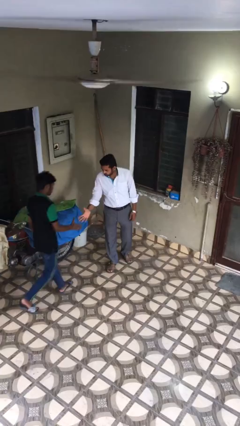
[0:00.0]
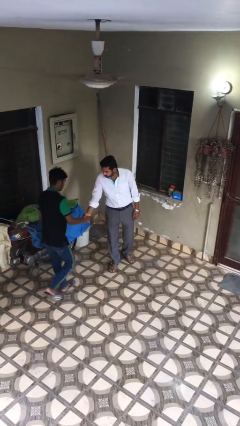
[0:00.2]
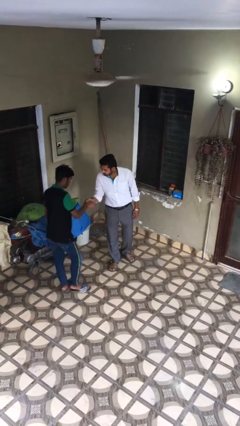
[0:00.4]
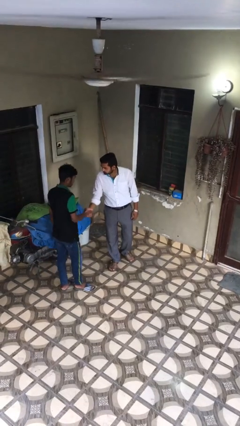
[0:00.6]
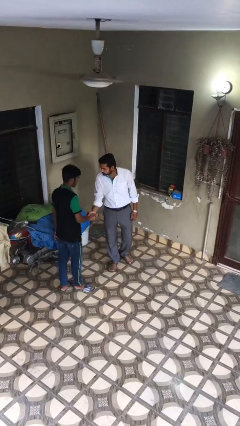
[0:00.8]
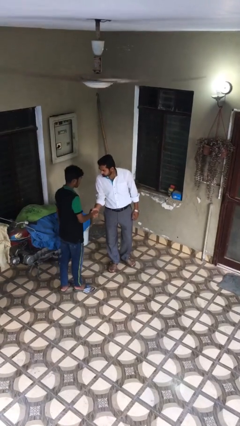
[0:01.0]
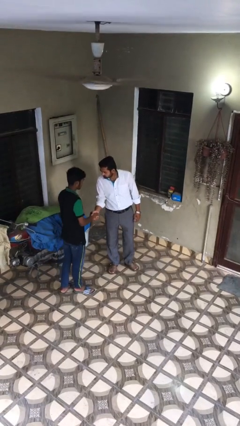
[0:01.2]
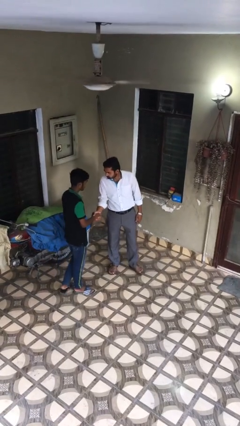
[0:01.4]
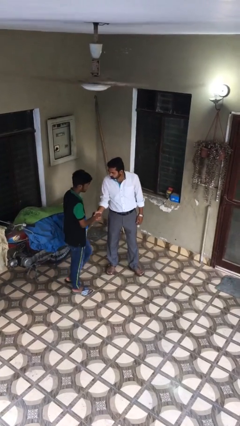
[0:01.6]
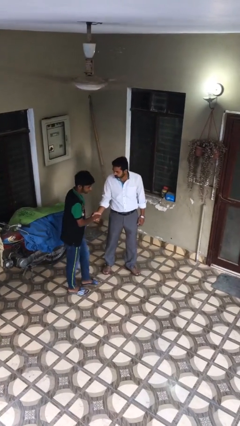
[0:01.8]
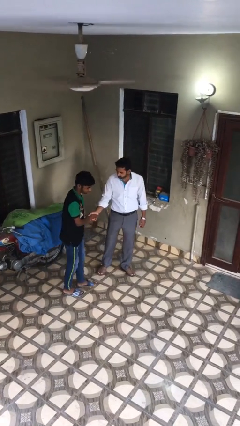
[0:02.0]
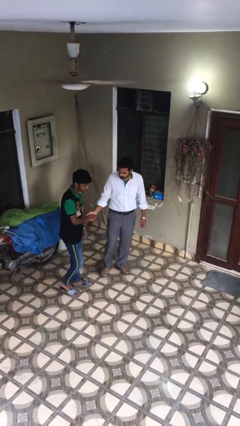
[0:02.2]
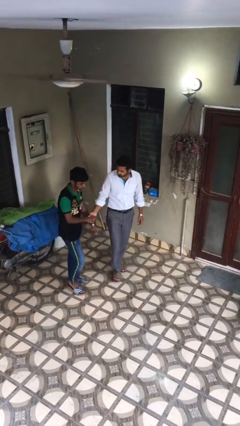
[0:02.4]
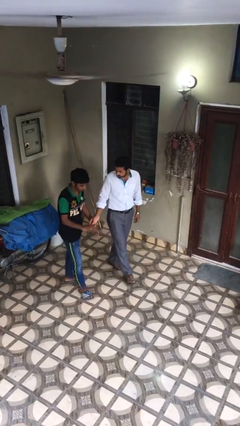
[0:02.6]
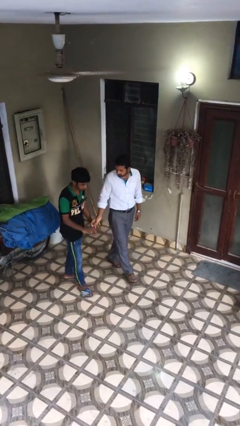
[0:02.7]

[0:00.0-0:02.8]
person shakes hand

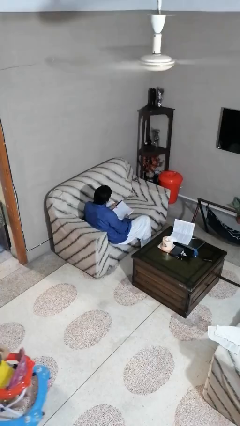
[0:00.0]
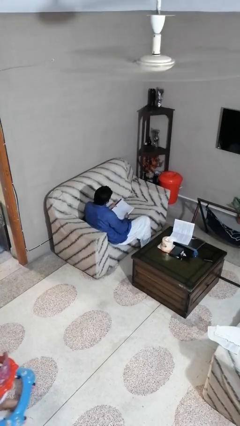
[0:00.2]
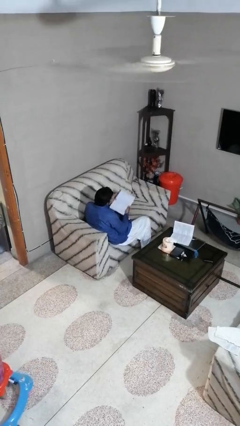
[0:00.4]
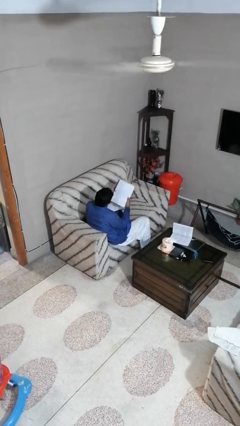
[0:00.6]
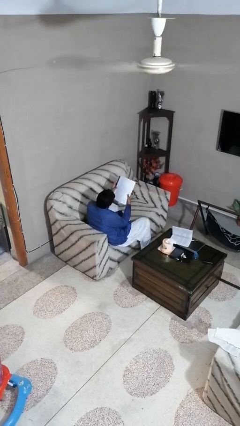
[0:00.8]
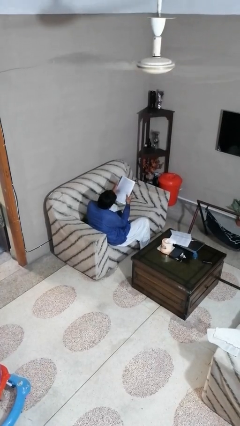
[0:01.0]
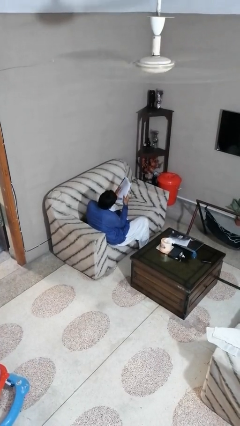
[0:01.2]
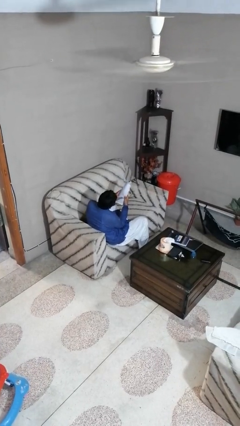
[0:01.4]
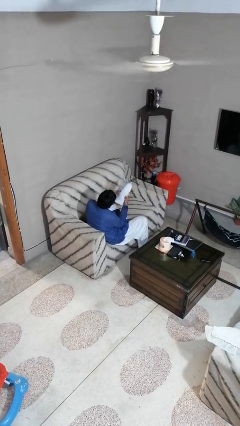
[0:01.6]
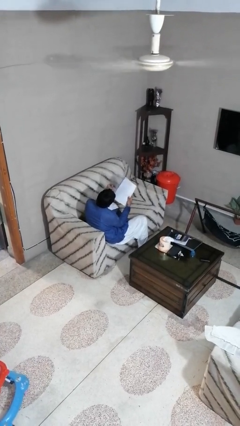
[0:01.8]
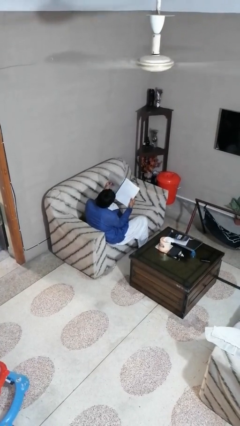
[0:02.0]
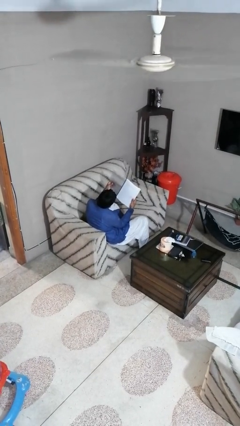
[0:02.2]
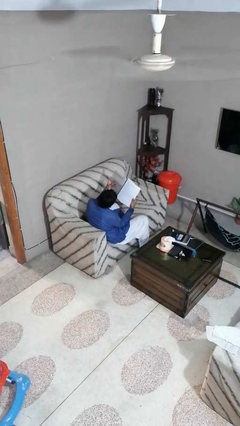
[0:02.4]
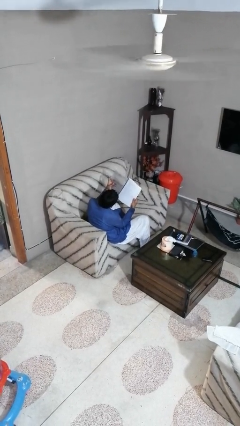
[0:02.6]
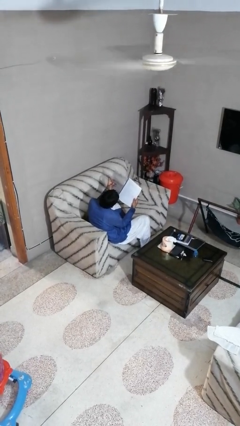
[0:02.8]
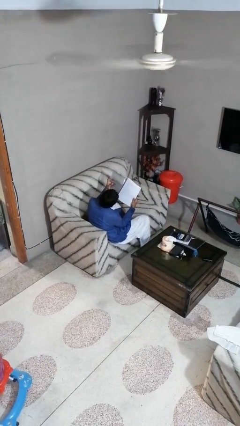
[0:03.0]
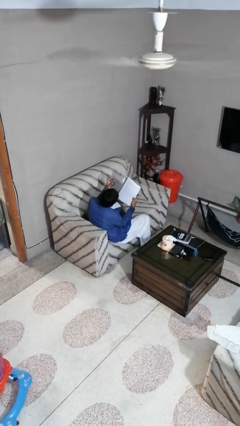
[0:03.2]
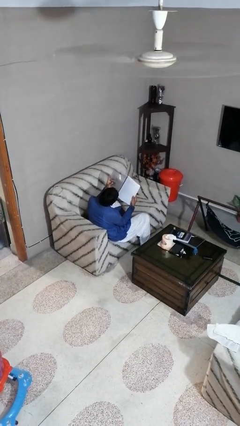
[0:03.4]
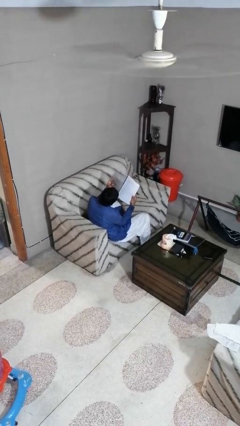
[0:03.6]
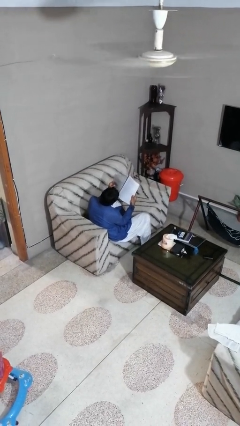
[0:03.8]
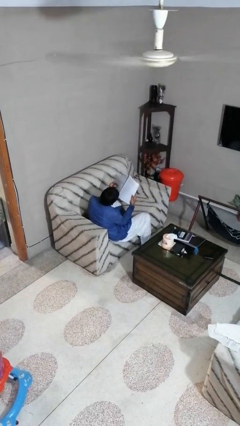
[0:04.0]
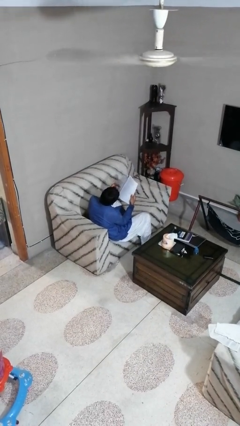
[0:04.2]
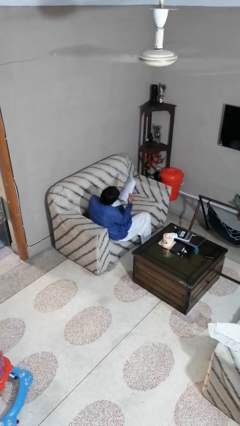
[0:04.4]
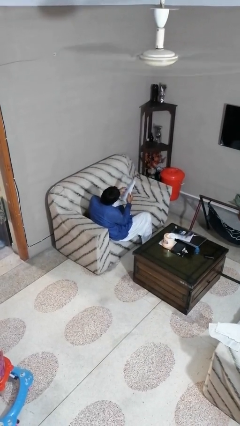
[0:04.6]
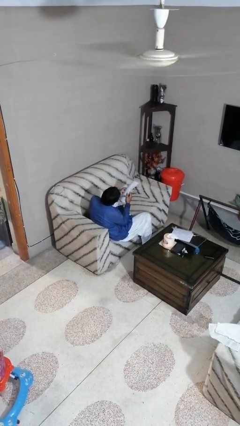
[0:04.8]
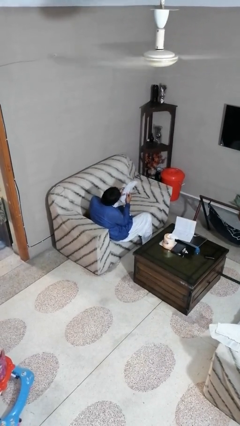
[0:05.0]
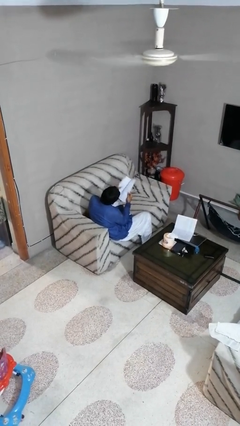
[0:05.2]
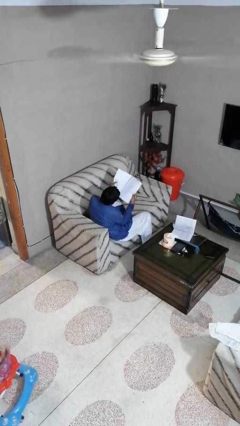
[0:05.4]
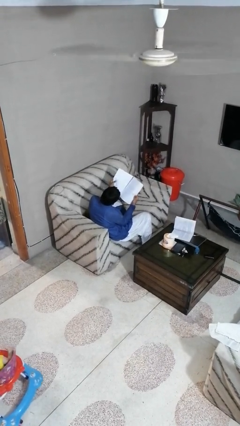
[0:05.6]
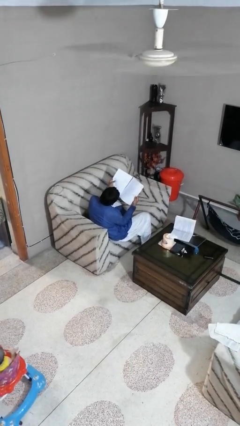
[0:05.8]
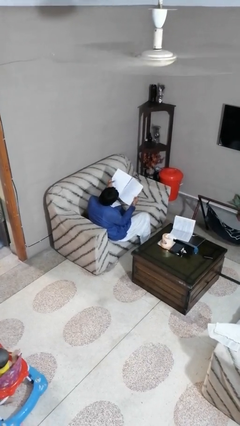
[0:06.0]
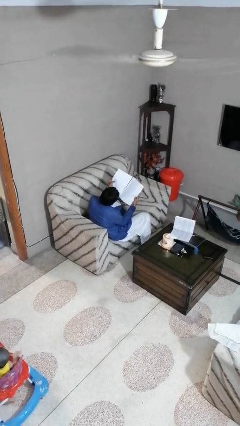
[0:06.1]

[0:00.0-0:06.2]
person reads magazine

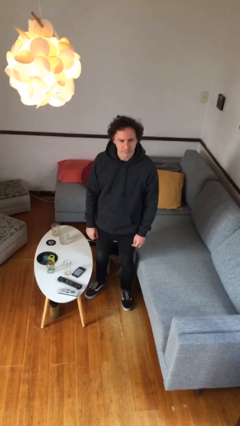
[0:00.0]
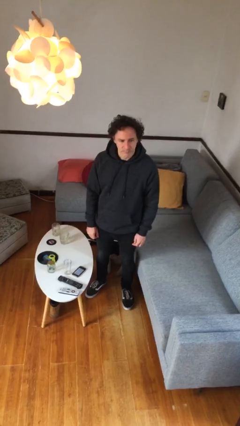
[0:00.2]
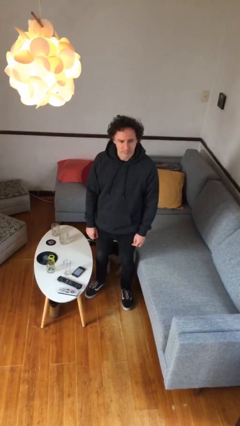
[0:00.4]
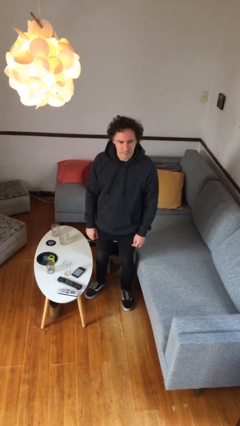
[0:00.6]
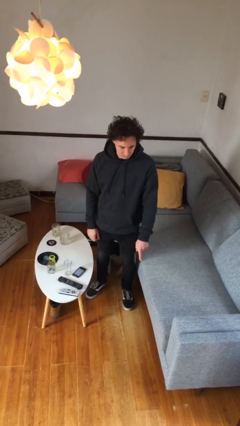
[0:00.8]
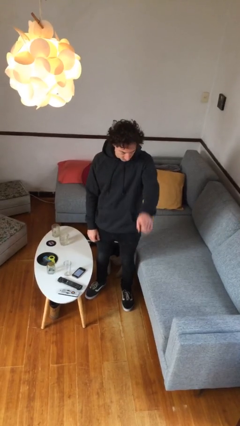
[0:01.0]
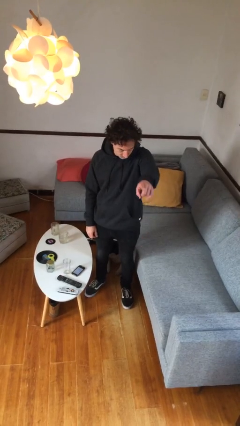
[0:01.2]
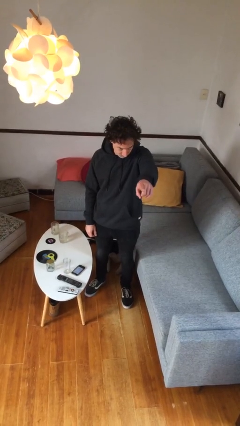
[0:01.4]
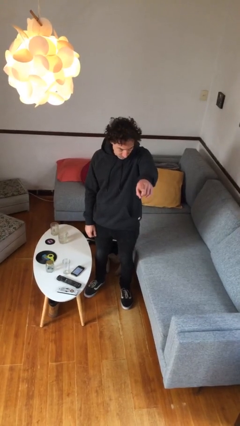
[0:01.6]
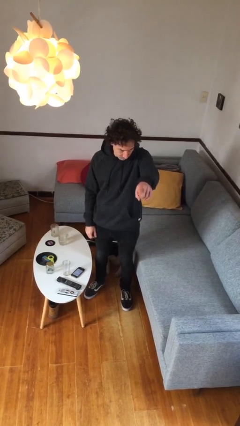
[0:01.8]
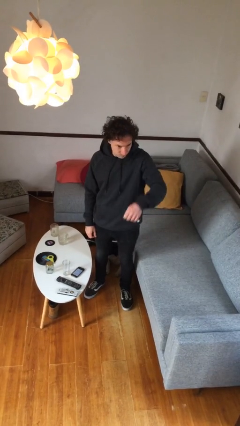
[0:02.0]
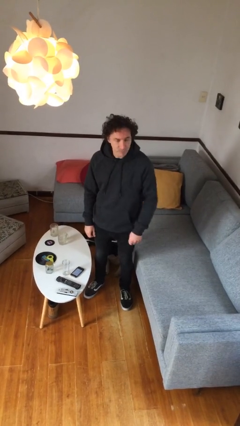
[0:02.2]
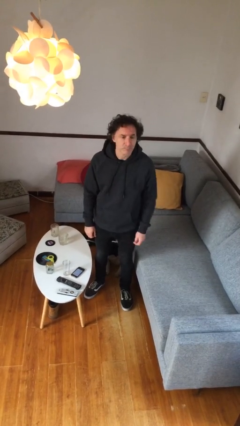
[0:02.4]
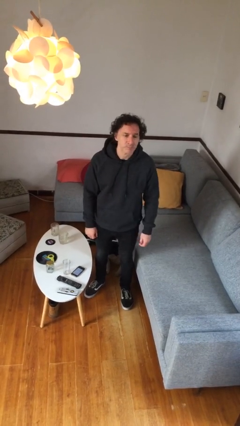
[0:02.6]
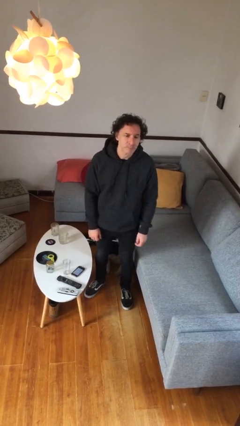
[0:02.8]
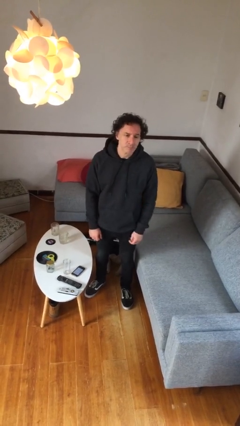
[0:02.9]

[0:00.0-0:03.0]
person points at person

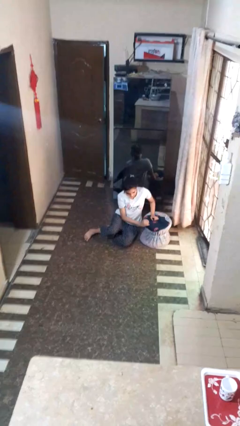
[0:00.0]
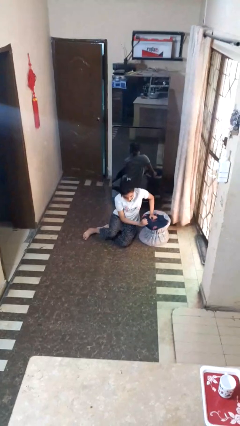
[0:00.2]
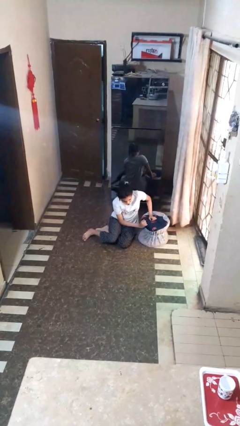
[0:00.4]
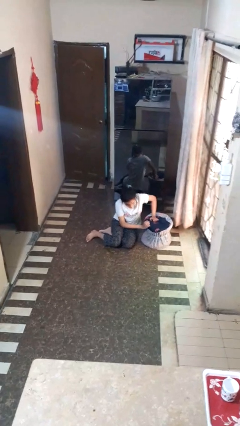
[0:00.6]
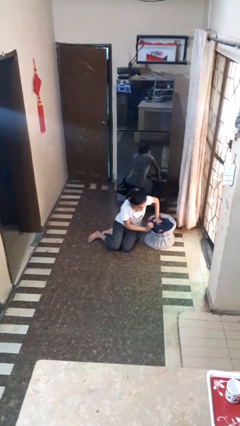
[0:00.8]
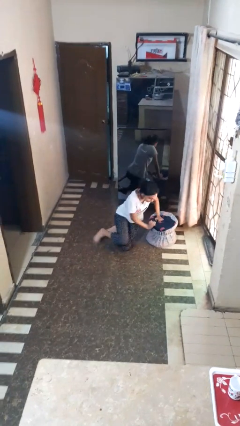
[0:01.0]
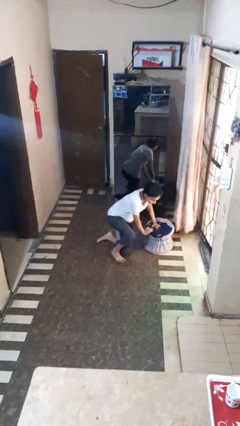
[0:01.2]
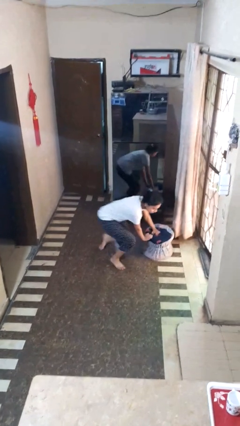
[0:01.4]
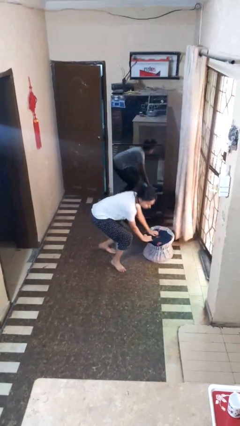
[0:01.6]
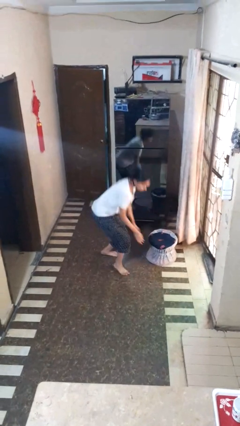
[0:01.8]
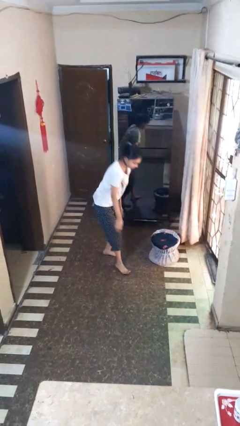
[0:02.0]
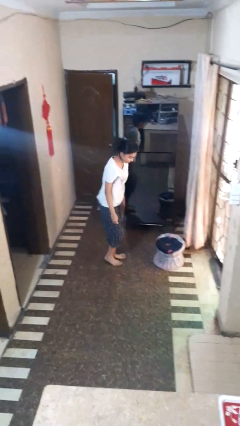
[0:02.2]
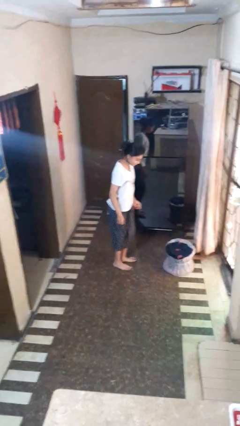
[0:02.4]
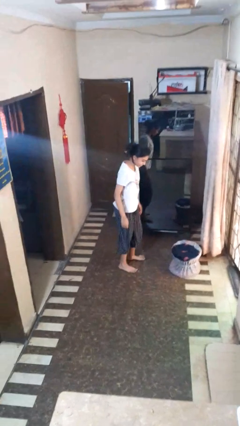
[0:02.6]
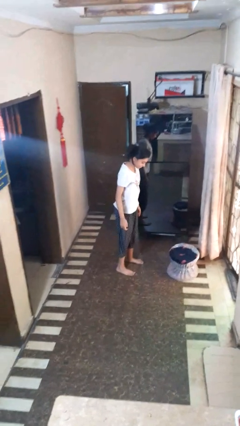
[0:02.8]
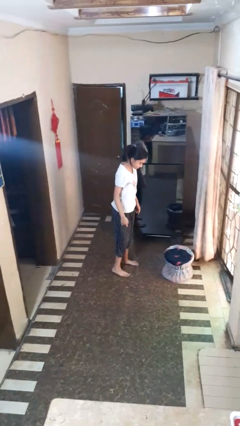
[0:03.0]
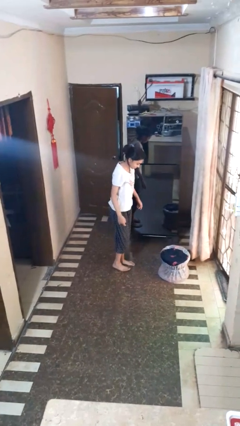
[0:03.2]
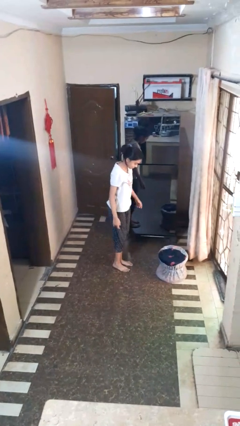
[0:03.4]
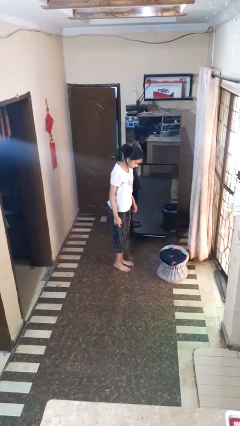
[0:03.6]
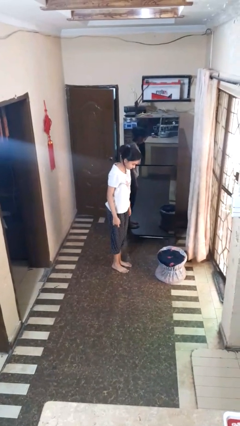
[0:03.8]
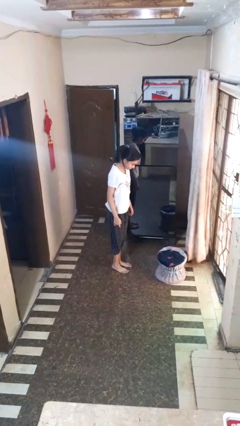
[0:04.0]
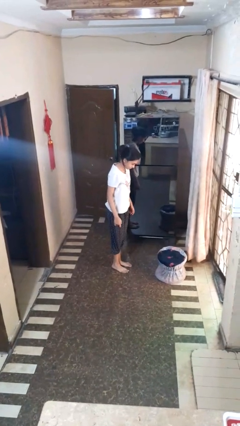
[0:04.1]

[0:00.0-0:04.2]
person stands up from floor

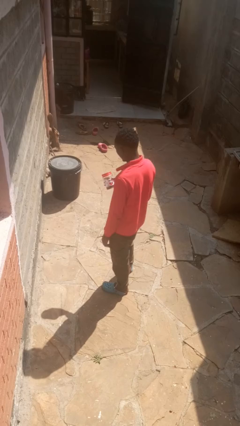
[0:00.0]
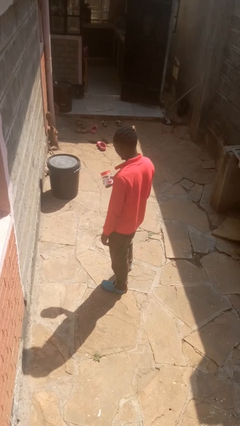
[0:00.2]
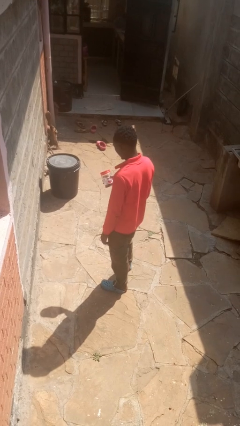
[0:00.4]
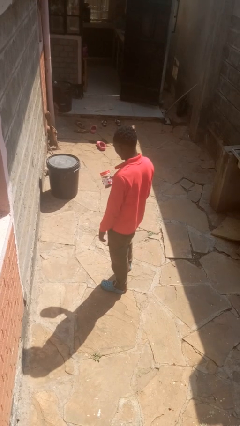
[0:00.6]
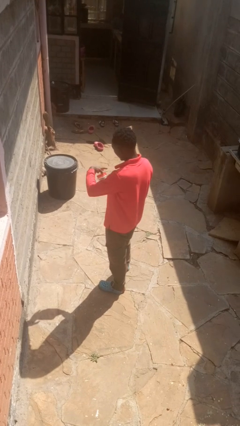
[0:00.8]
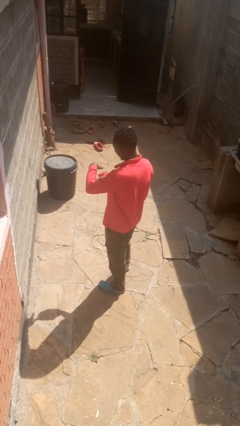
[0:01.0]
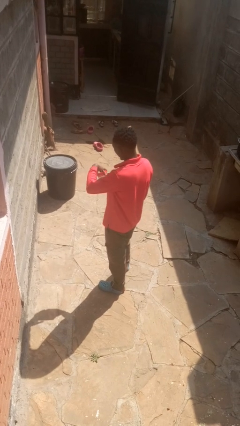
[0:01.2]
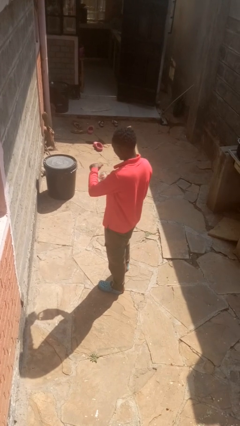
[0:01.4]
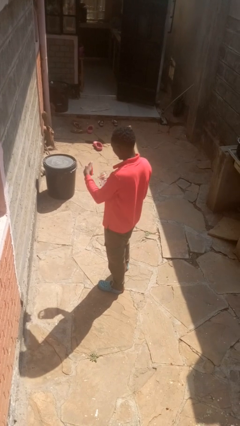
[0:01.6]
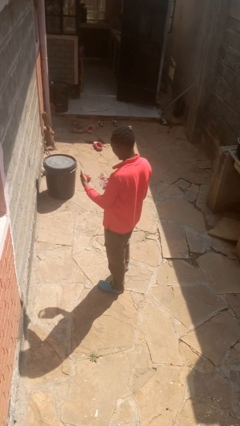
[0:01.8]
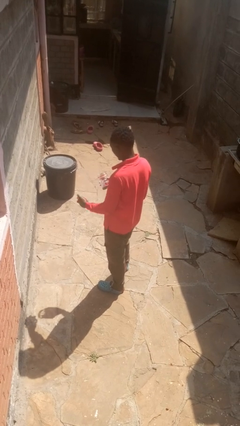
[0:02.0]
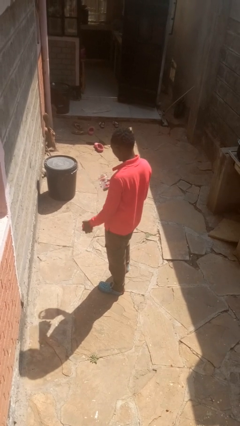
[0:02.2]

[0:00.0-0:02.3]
person opens jar
